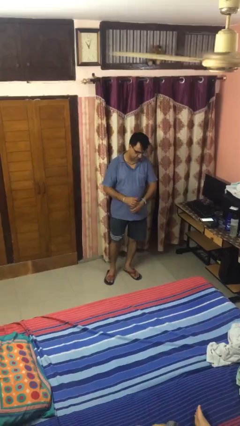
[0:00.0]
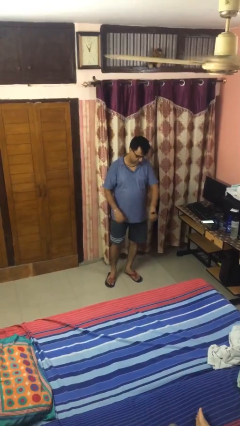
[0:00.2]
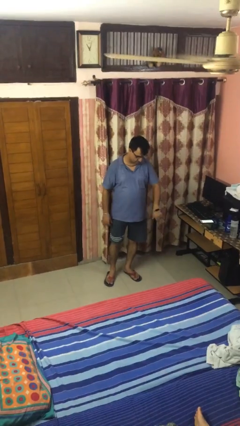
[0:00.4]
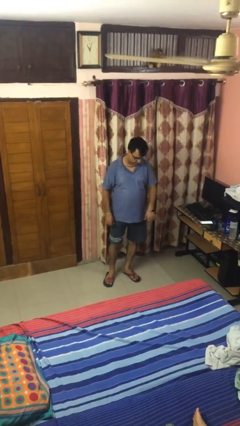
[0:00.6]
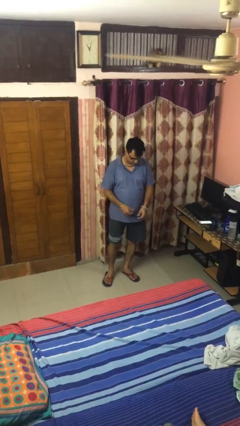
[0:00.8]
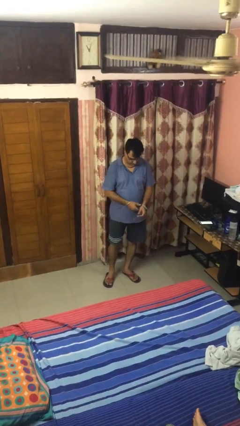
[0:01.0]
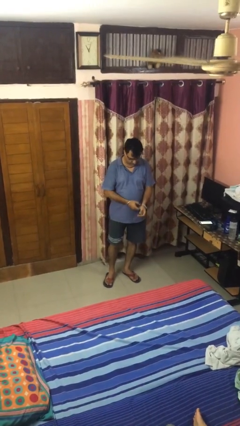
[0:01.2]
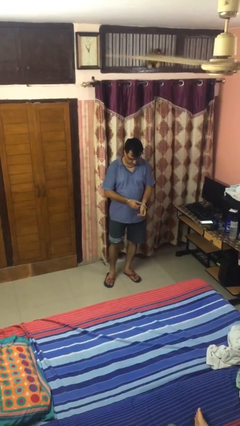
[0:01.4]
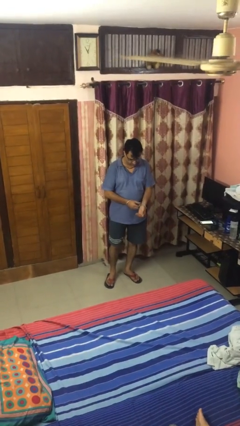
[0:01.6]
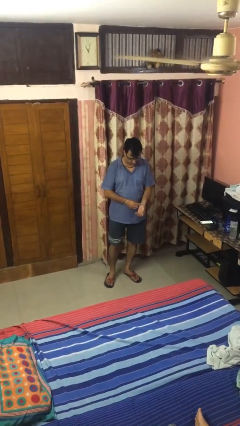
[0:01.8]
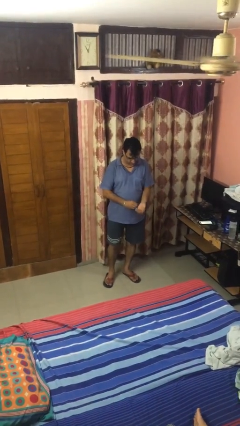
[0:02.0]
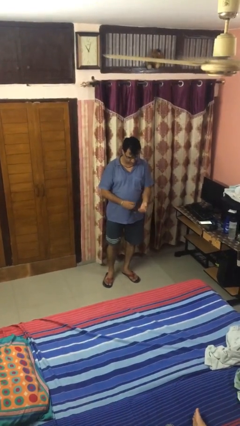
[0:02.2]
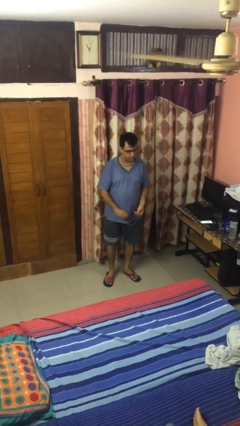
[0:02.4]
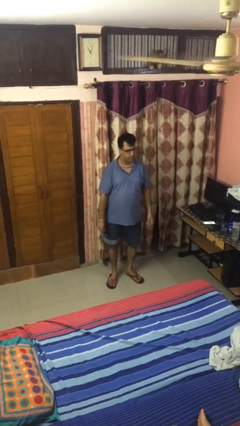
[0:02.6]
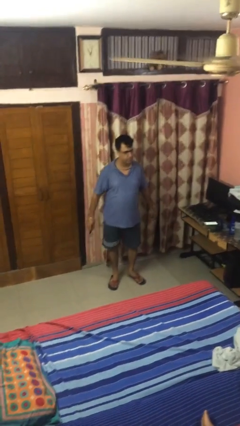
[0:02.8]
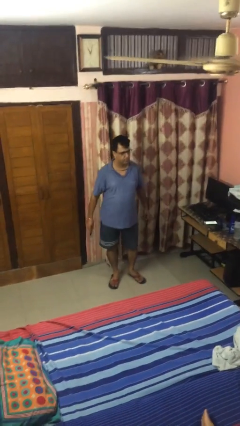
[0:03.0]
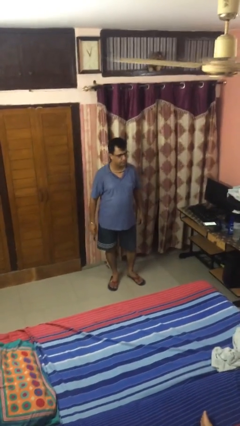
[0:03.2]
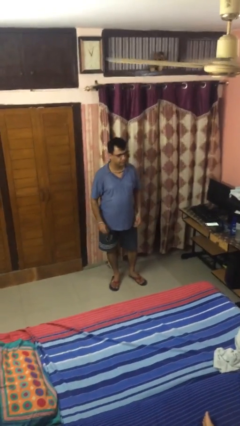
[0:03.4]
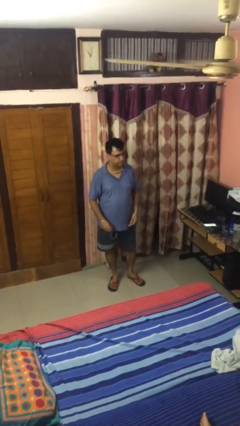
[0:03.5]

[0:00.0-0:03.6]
person takes off wristwatch

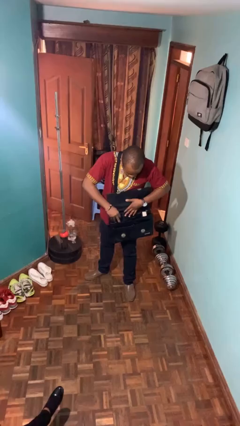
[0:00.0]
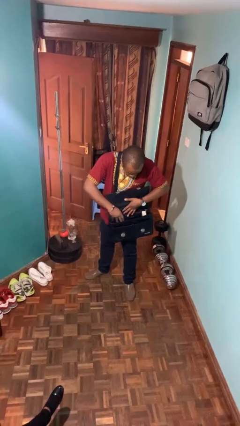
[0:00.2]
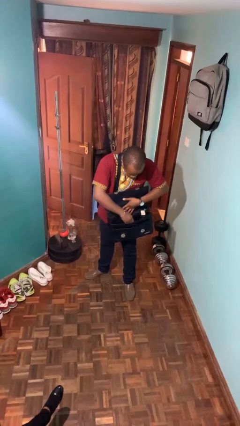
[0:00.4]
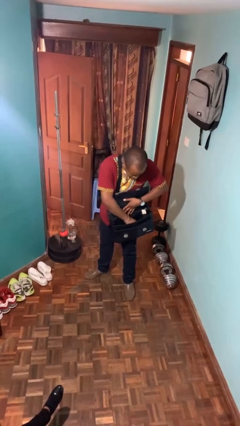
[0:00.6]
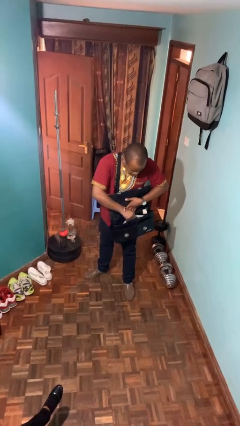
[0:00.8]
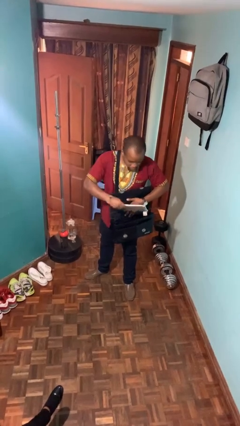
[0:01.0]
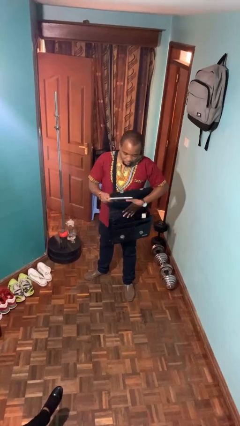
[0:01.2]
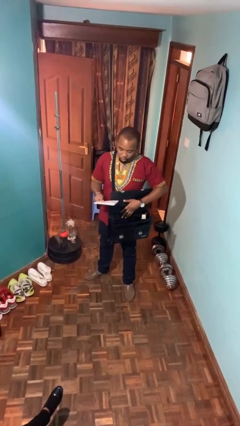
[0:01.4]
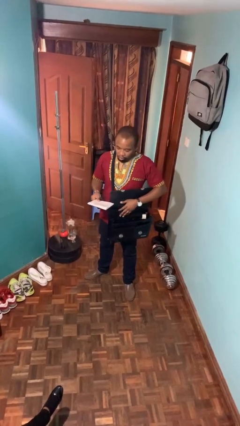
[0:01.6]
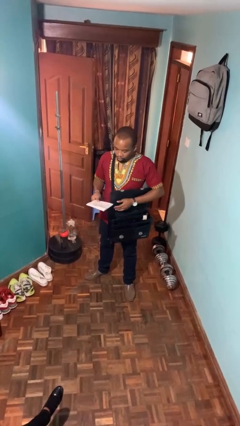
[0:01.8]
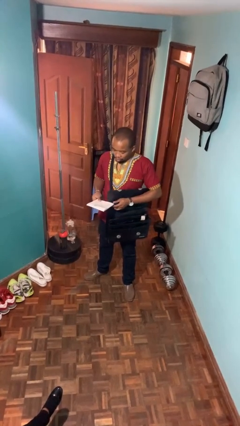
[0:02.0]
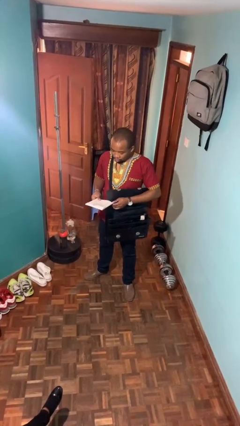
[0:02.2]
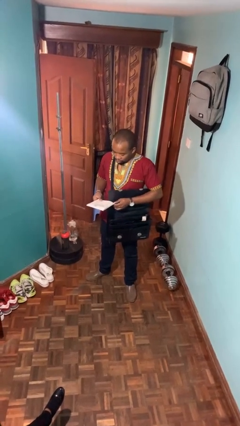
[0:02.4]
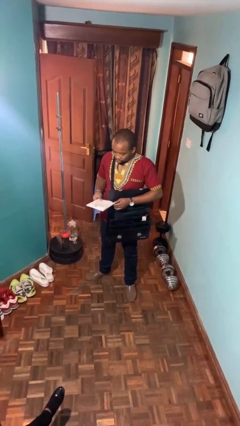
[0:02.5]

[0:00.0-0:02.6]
person takes object from purse

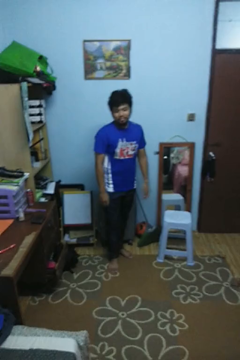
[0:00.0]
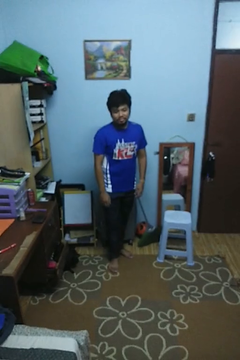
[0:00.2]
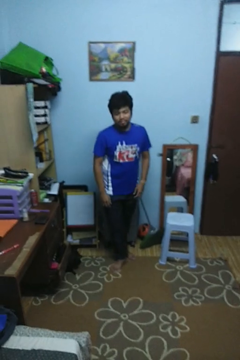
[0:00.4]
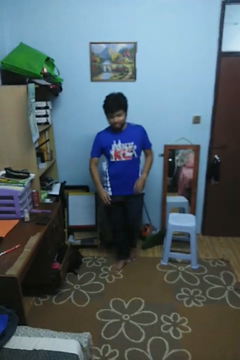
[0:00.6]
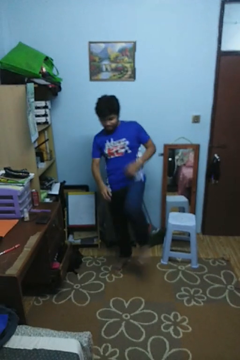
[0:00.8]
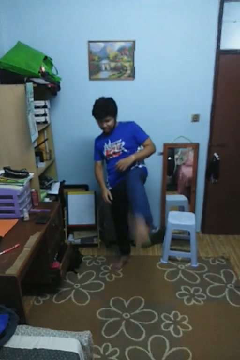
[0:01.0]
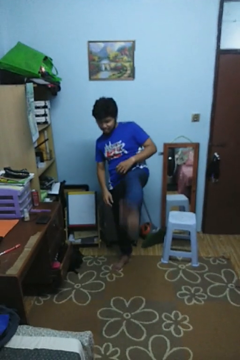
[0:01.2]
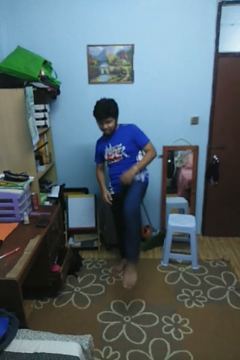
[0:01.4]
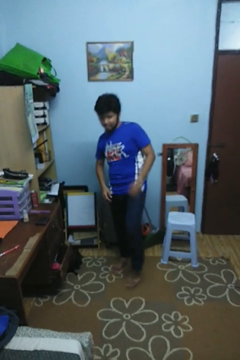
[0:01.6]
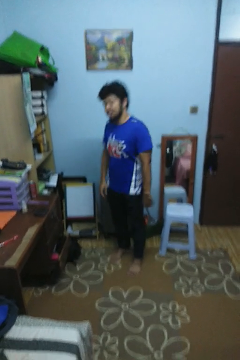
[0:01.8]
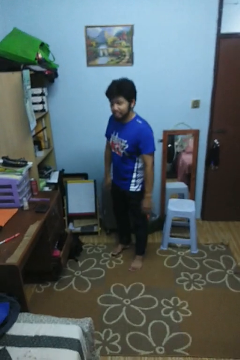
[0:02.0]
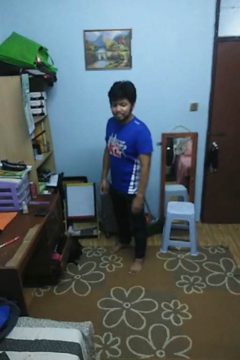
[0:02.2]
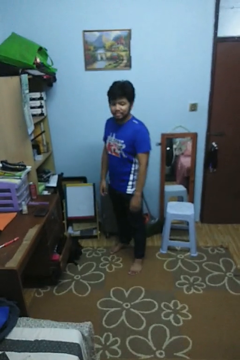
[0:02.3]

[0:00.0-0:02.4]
person karate kicks

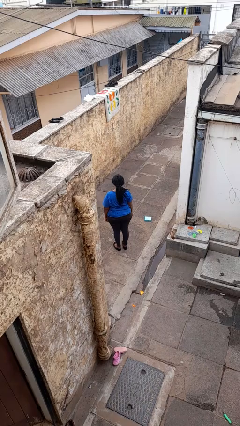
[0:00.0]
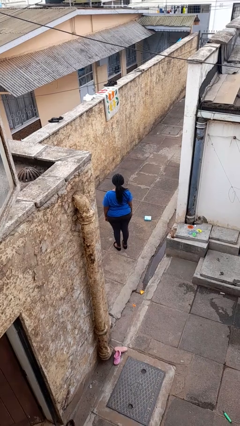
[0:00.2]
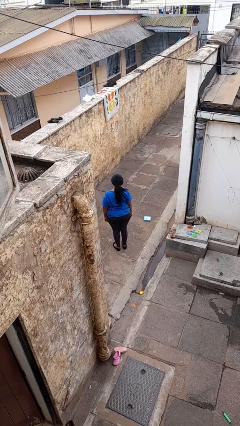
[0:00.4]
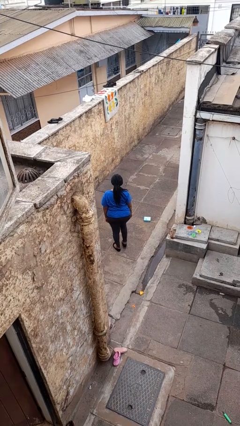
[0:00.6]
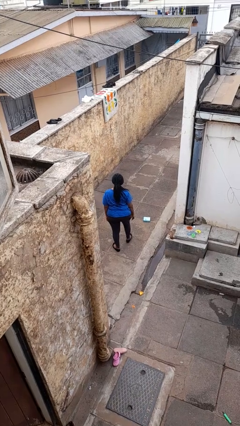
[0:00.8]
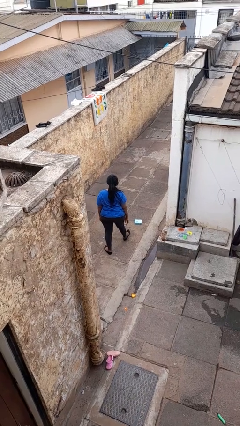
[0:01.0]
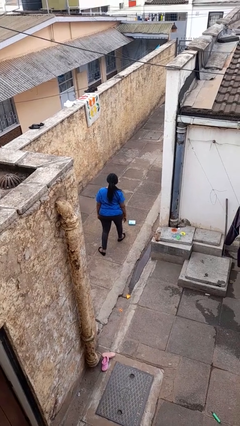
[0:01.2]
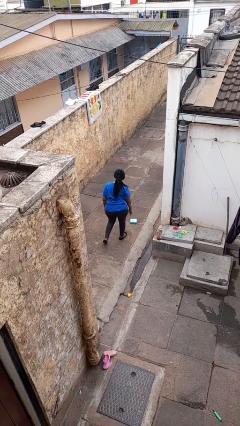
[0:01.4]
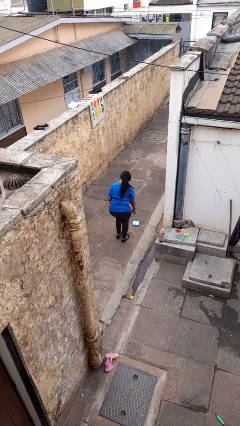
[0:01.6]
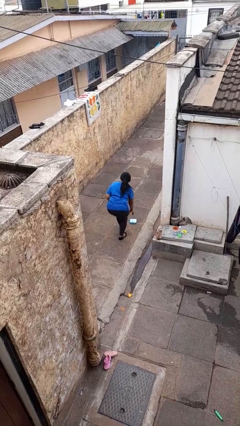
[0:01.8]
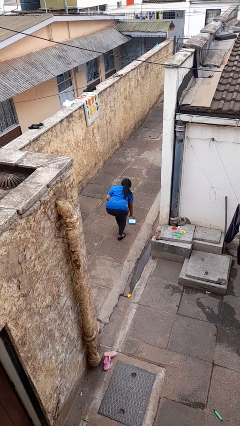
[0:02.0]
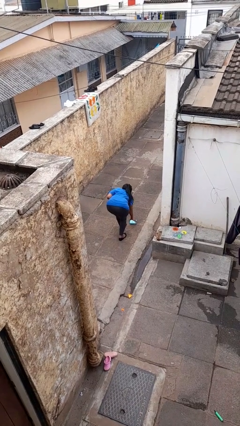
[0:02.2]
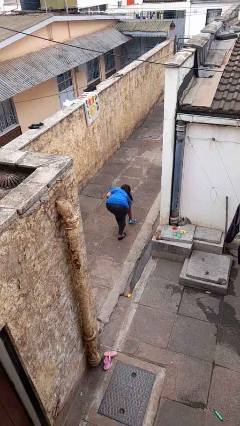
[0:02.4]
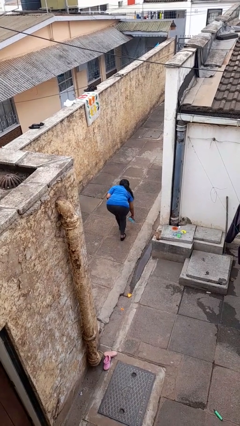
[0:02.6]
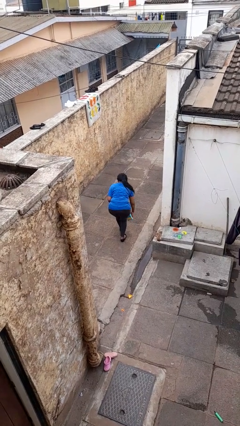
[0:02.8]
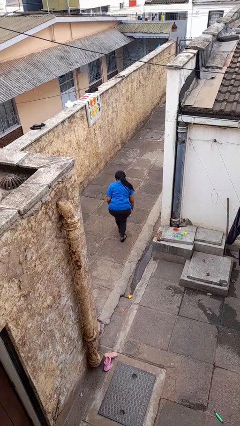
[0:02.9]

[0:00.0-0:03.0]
person picks up object from floor

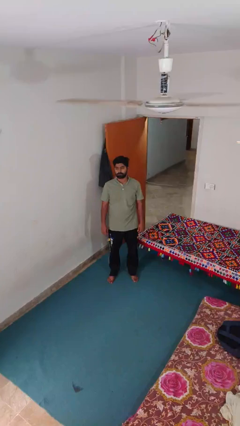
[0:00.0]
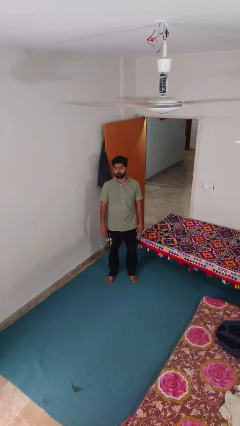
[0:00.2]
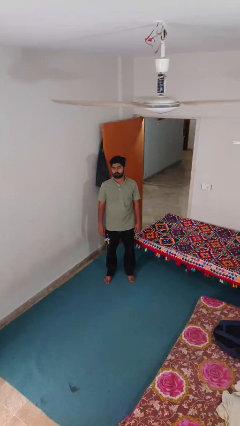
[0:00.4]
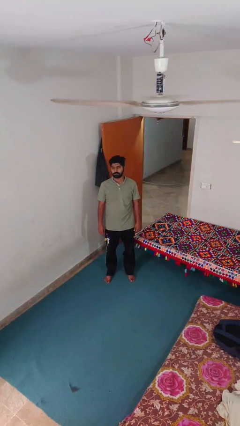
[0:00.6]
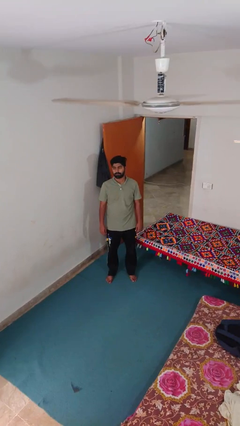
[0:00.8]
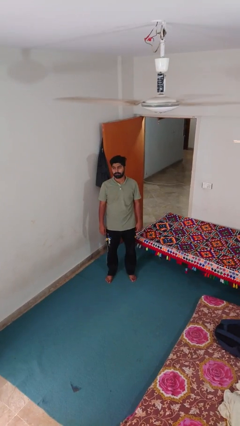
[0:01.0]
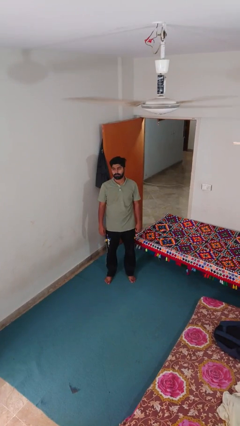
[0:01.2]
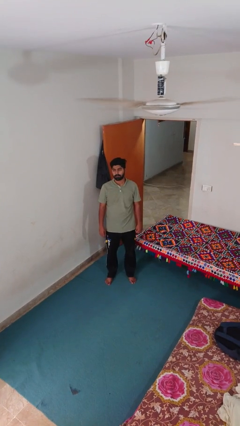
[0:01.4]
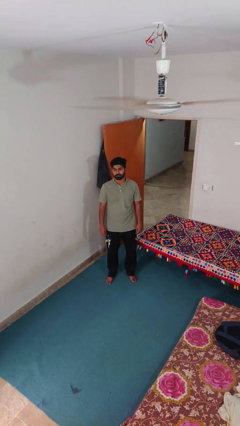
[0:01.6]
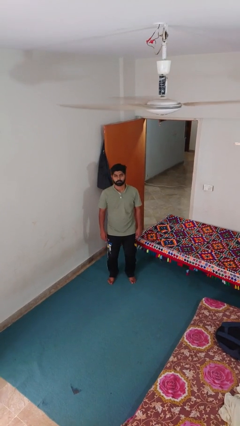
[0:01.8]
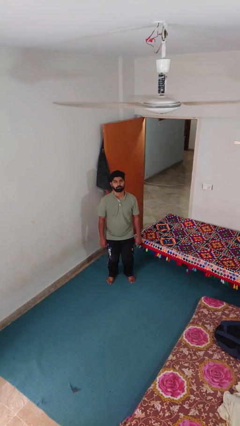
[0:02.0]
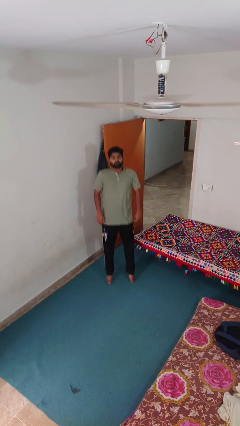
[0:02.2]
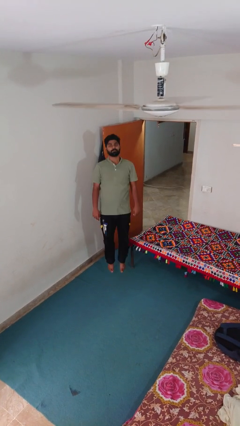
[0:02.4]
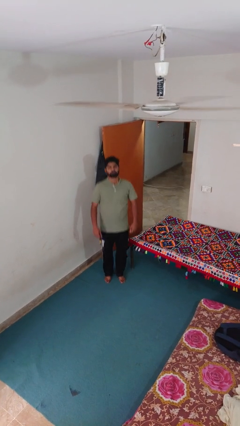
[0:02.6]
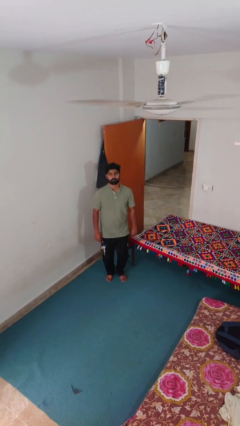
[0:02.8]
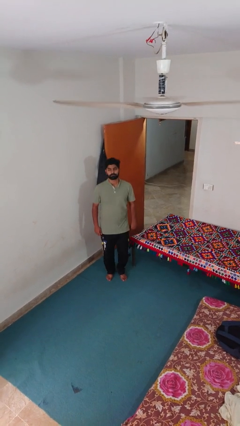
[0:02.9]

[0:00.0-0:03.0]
person jumps

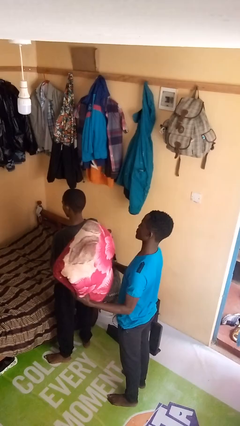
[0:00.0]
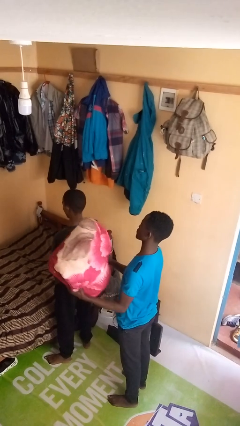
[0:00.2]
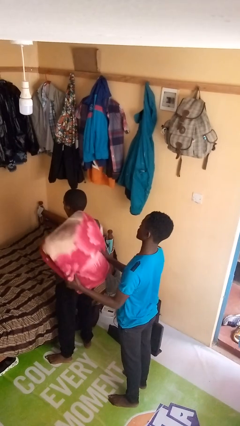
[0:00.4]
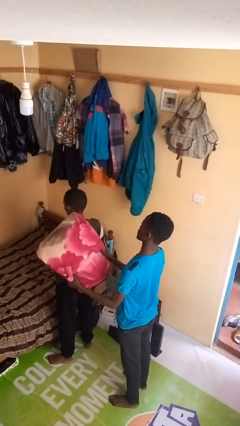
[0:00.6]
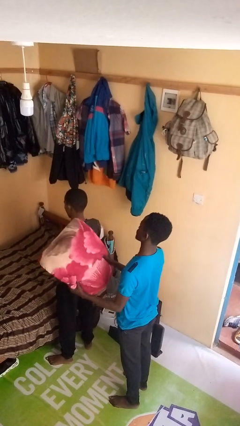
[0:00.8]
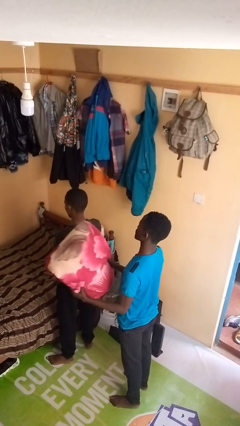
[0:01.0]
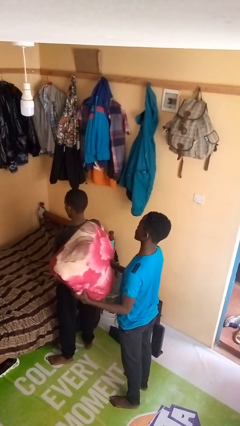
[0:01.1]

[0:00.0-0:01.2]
person hits person with pillow

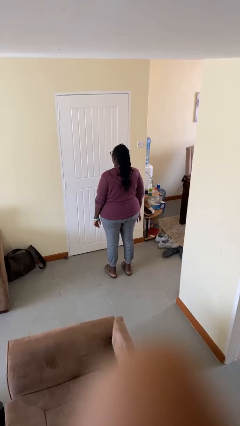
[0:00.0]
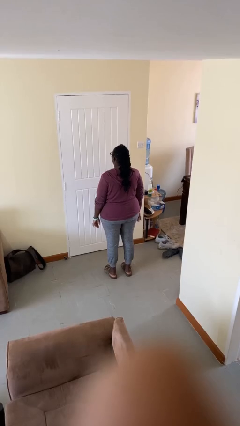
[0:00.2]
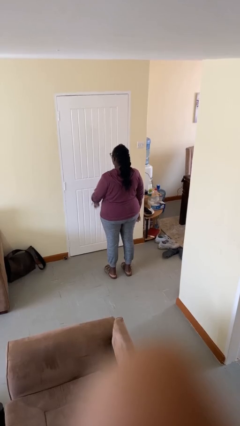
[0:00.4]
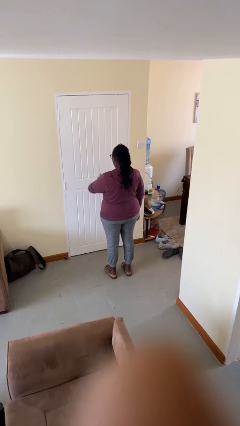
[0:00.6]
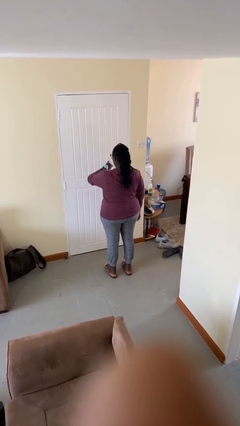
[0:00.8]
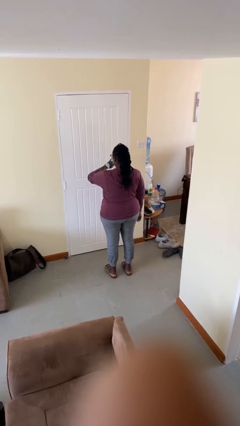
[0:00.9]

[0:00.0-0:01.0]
person looks at wristwatch

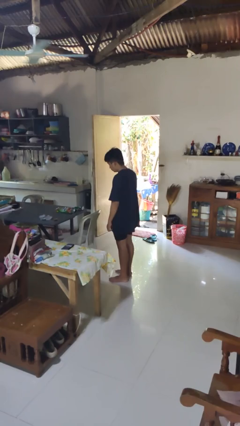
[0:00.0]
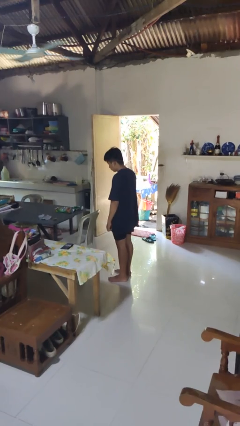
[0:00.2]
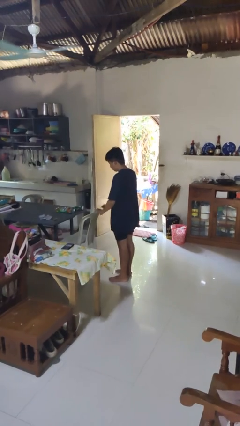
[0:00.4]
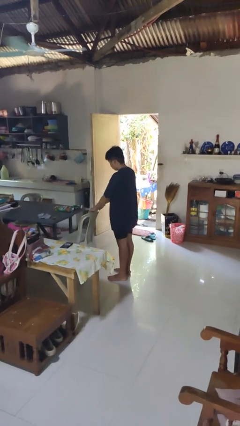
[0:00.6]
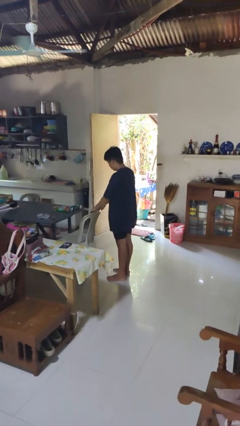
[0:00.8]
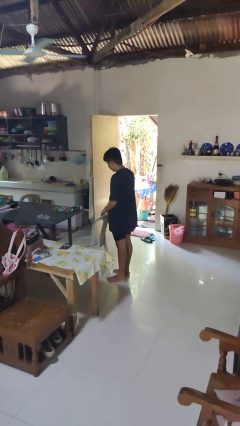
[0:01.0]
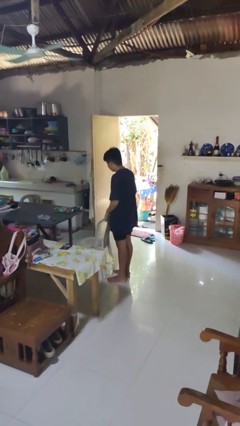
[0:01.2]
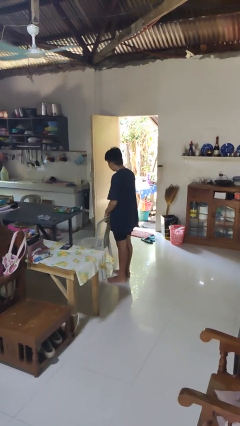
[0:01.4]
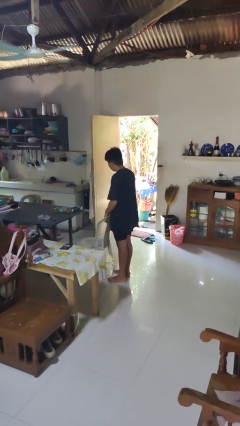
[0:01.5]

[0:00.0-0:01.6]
person pulls out chair
